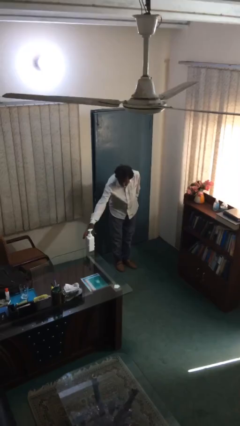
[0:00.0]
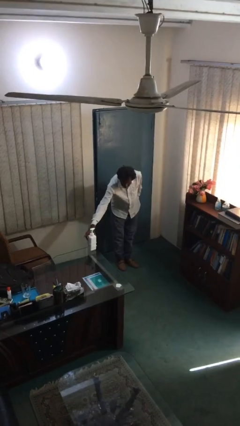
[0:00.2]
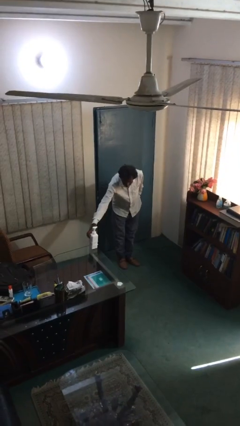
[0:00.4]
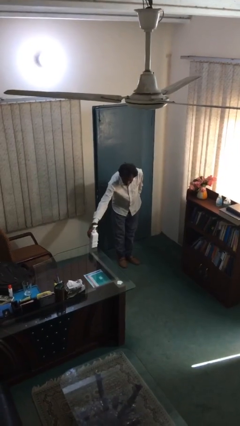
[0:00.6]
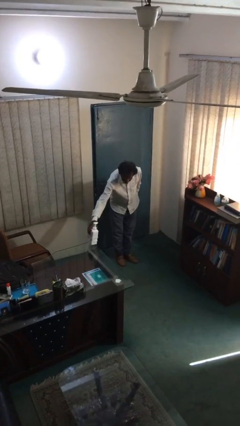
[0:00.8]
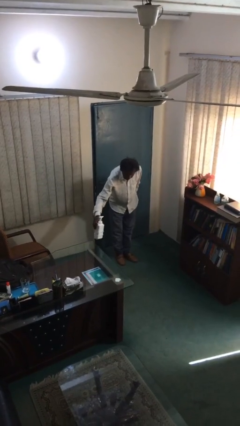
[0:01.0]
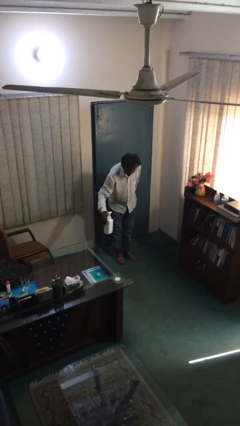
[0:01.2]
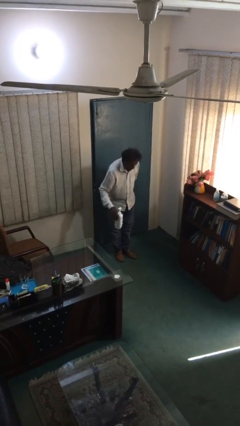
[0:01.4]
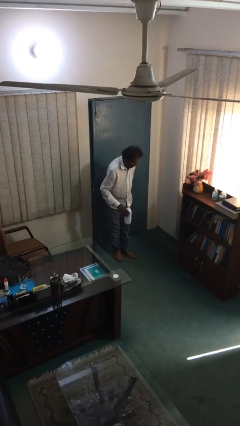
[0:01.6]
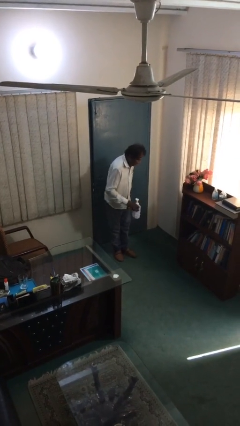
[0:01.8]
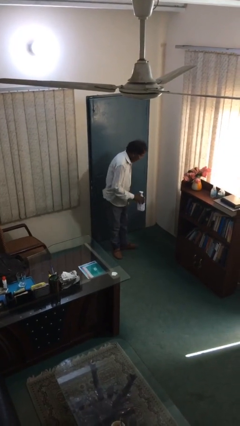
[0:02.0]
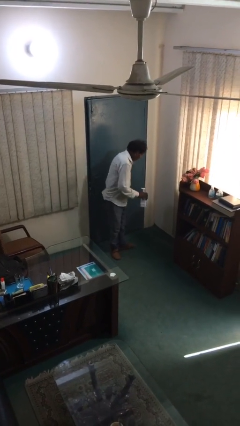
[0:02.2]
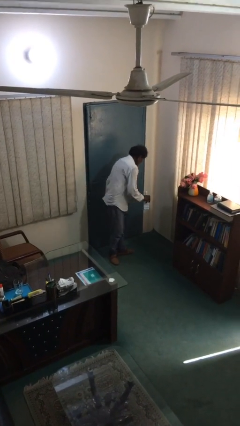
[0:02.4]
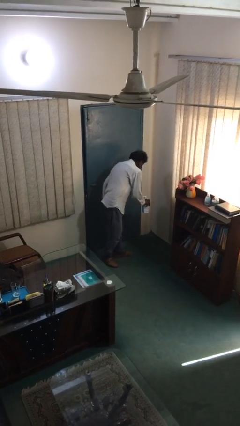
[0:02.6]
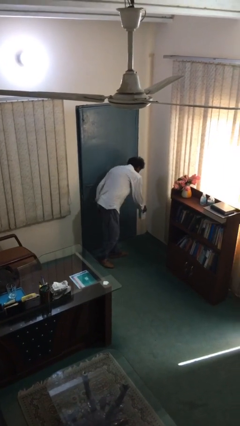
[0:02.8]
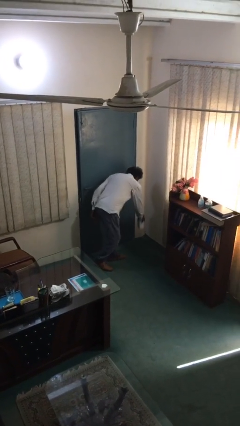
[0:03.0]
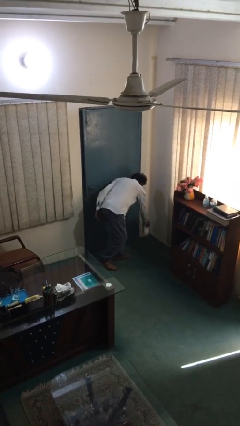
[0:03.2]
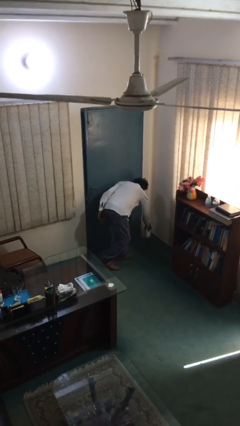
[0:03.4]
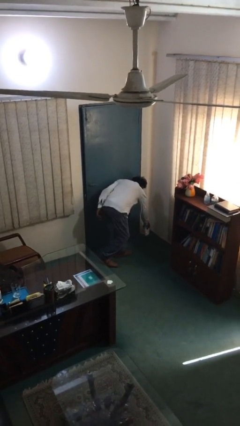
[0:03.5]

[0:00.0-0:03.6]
person picks up object from table

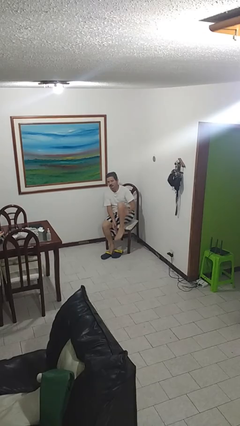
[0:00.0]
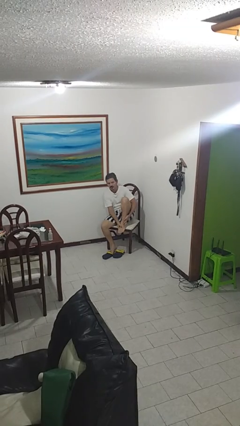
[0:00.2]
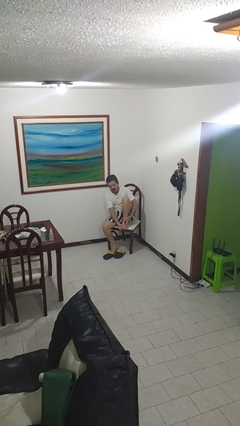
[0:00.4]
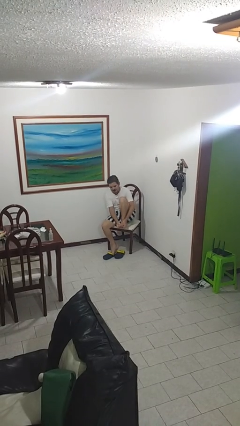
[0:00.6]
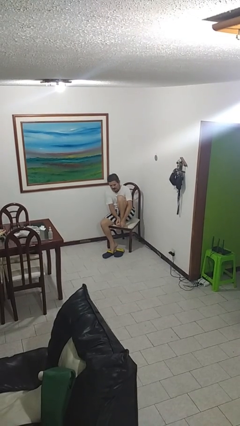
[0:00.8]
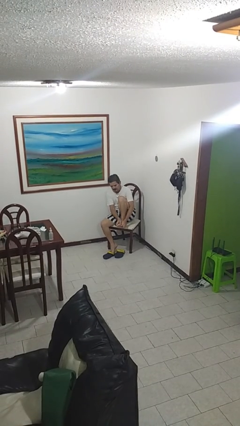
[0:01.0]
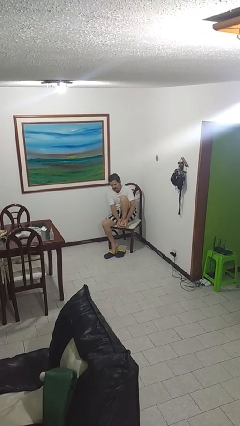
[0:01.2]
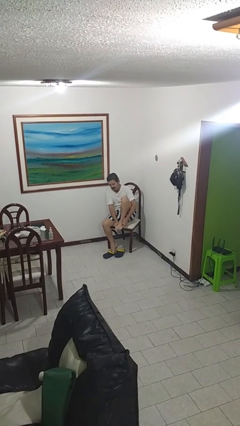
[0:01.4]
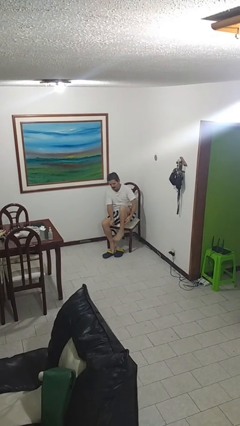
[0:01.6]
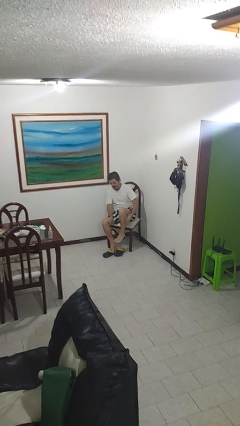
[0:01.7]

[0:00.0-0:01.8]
person rubs foot

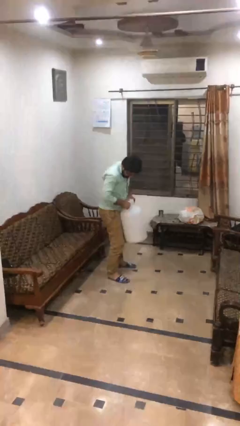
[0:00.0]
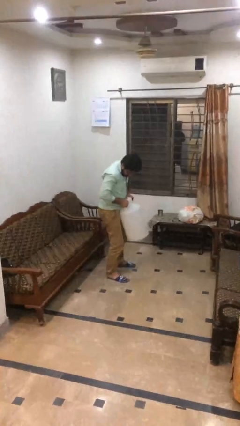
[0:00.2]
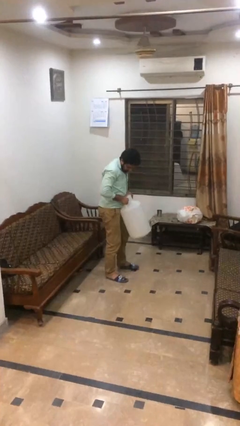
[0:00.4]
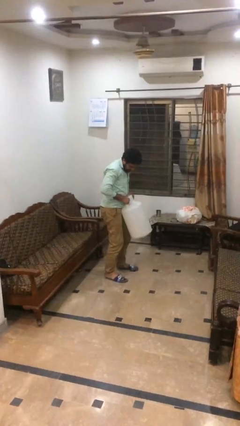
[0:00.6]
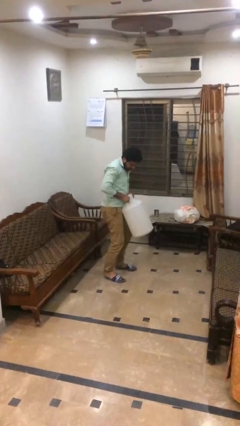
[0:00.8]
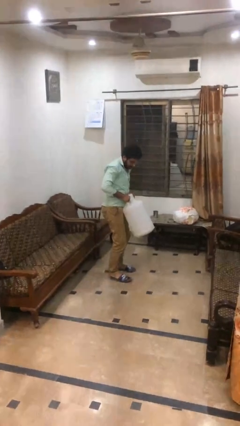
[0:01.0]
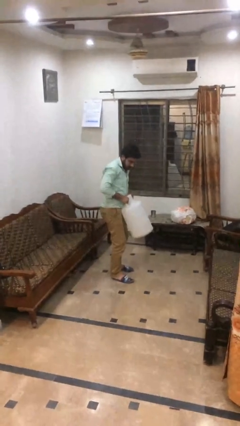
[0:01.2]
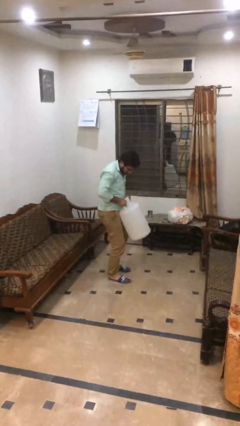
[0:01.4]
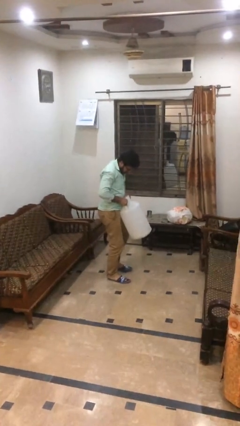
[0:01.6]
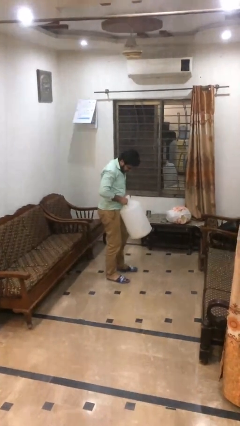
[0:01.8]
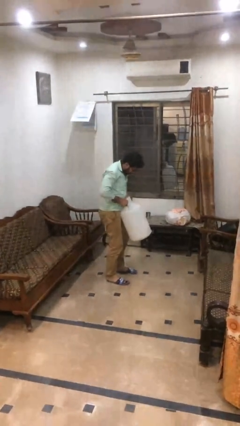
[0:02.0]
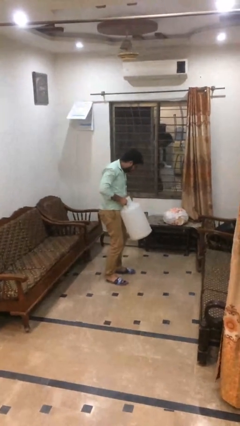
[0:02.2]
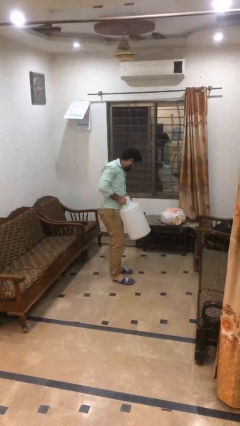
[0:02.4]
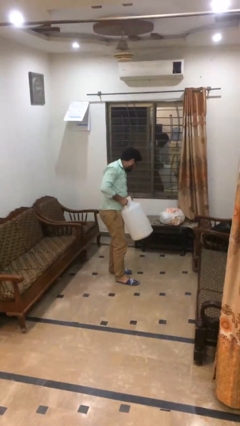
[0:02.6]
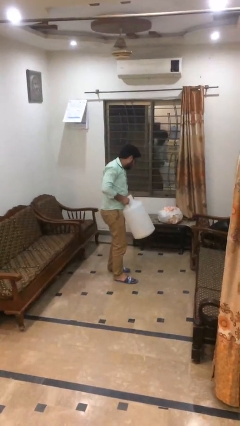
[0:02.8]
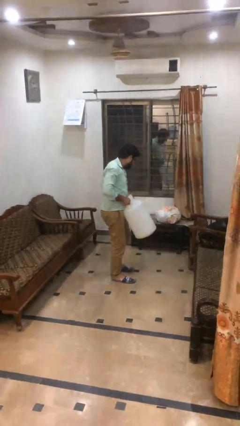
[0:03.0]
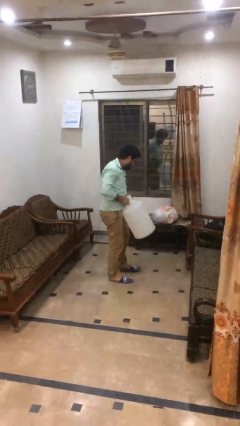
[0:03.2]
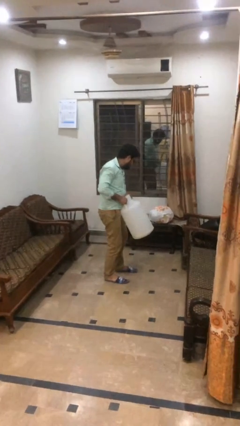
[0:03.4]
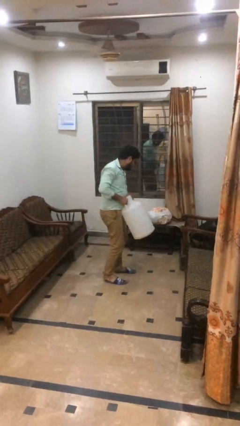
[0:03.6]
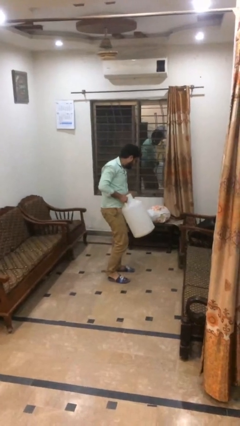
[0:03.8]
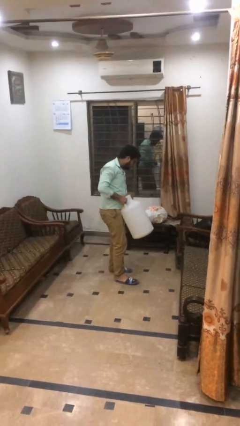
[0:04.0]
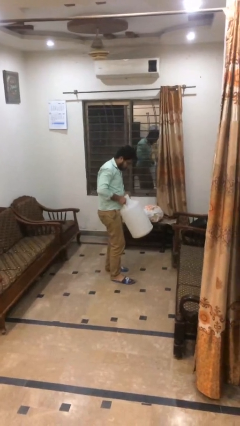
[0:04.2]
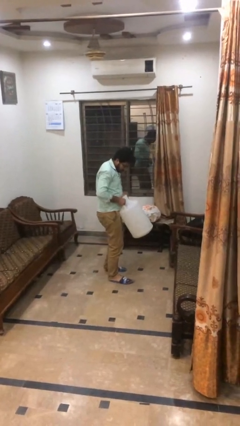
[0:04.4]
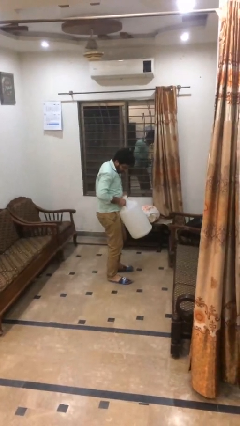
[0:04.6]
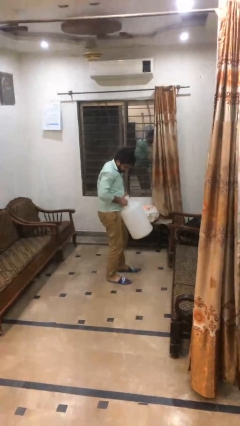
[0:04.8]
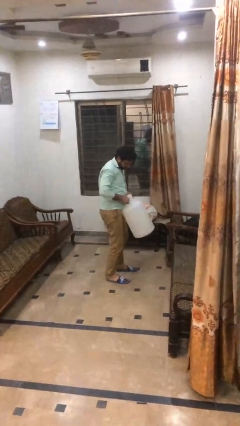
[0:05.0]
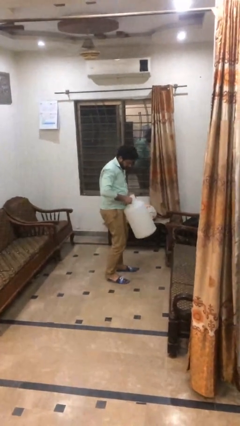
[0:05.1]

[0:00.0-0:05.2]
person carries heavy object

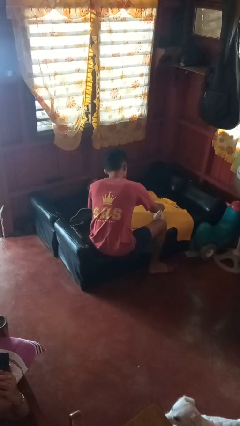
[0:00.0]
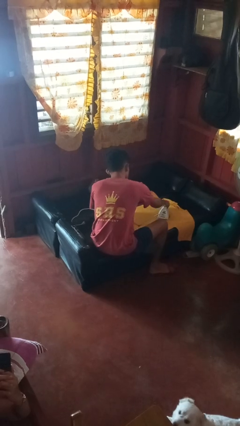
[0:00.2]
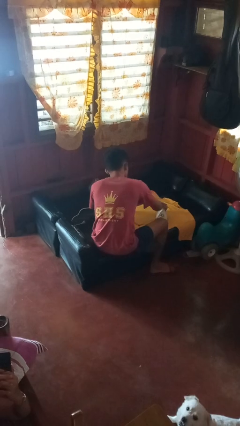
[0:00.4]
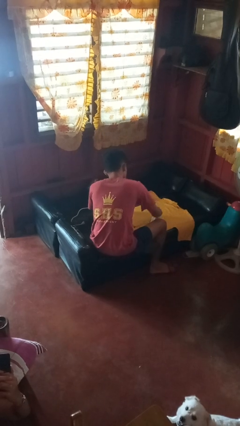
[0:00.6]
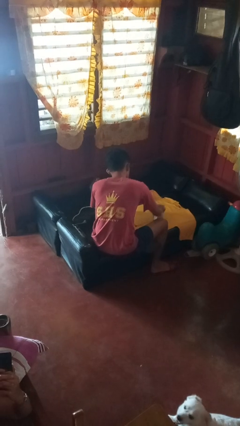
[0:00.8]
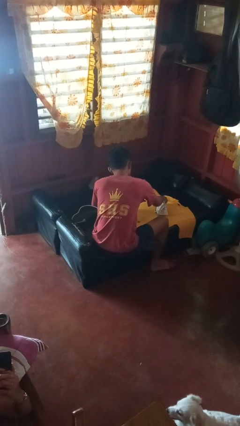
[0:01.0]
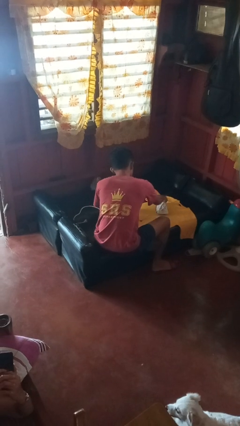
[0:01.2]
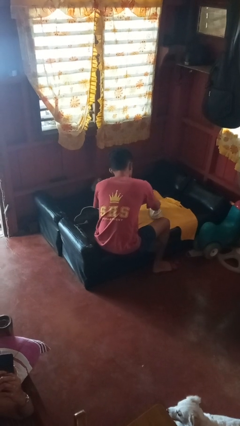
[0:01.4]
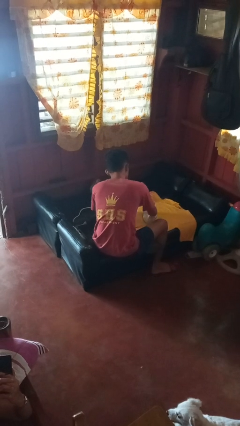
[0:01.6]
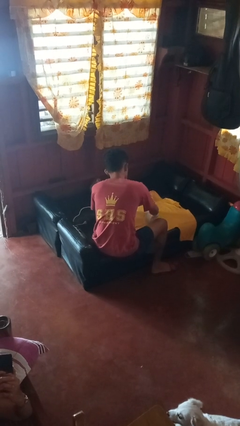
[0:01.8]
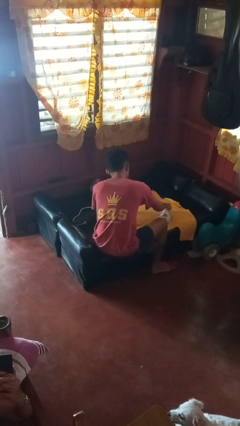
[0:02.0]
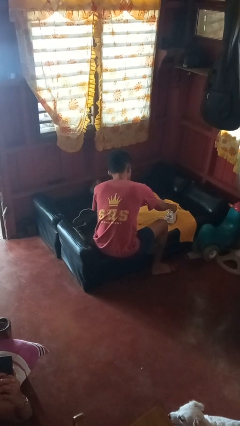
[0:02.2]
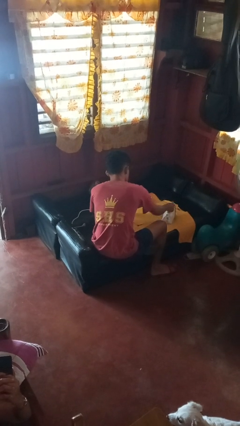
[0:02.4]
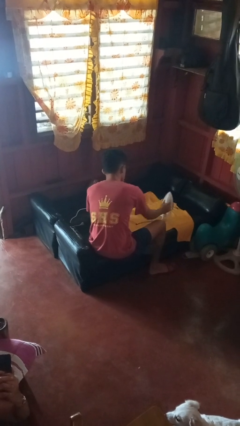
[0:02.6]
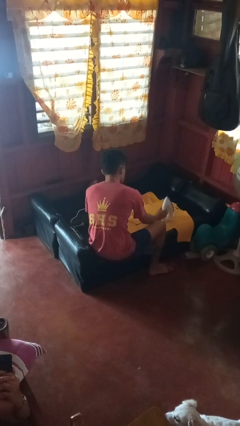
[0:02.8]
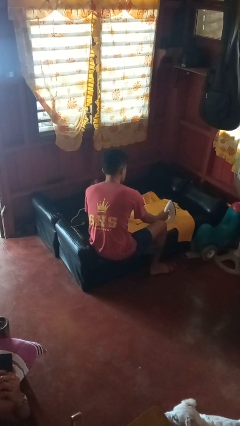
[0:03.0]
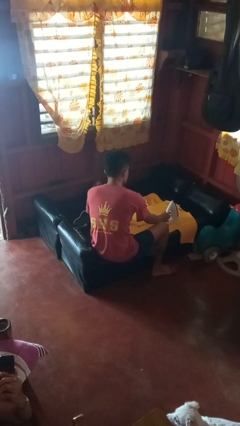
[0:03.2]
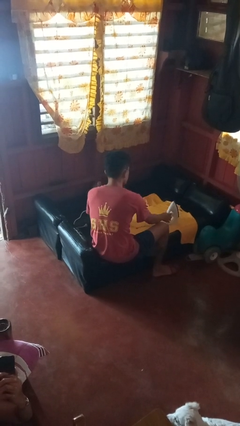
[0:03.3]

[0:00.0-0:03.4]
person irons clothes

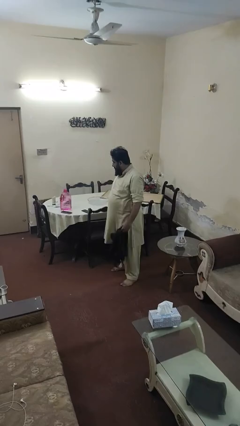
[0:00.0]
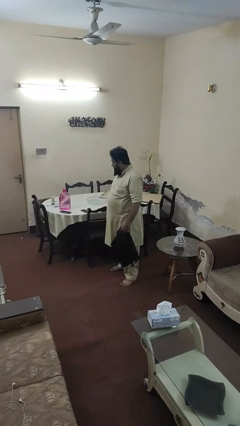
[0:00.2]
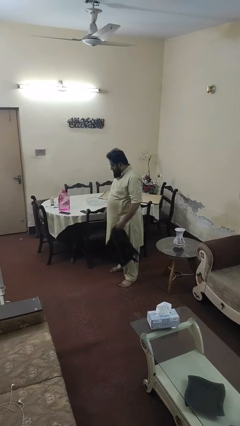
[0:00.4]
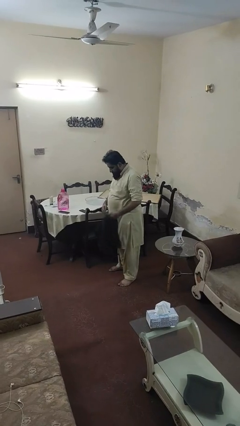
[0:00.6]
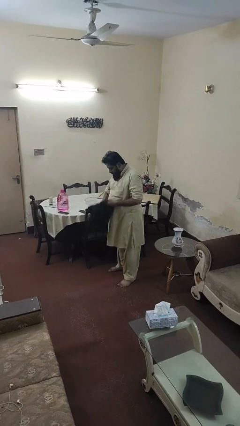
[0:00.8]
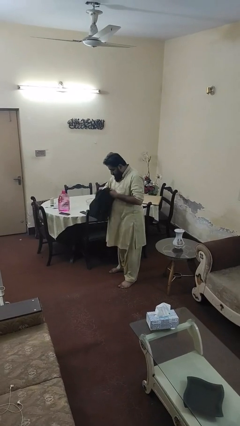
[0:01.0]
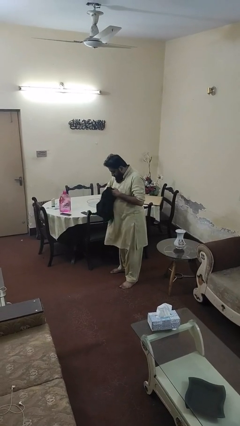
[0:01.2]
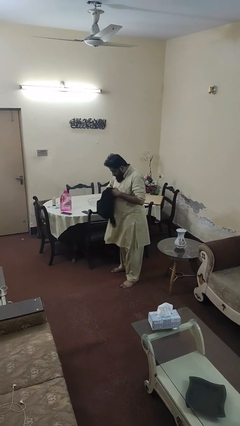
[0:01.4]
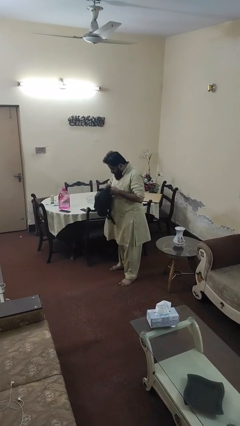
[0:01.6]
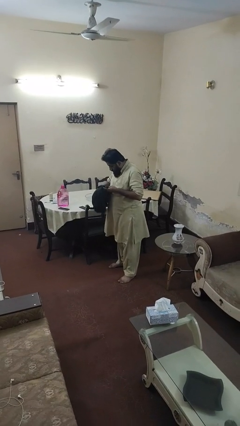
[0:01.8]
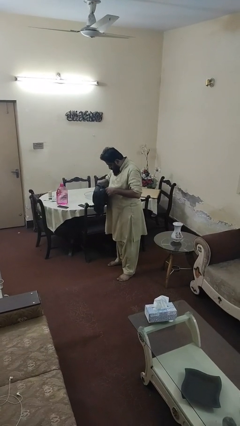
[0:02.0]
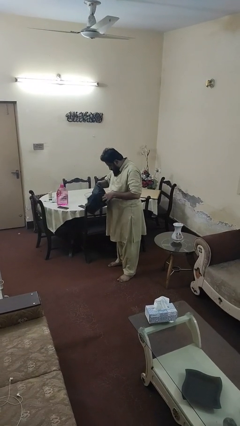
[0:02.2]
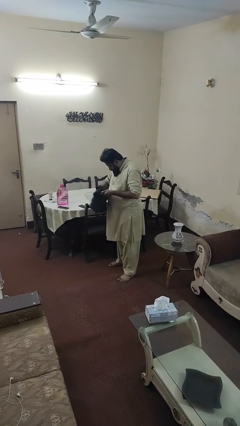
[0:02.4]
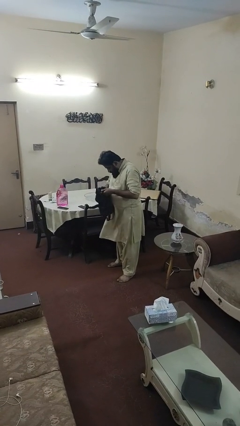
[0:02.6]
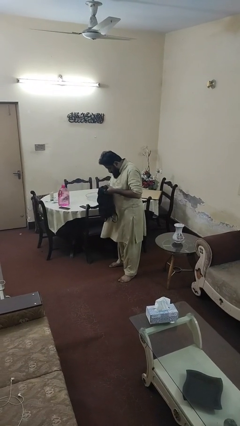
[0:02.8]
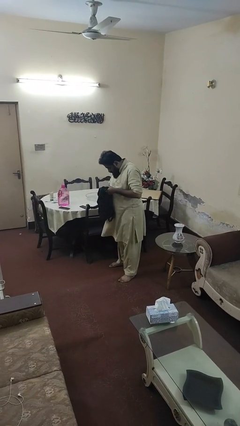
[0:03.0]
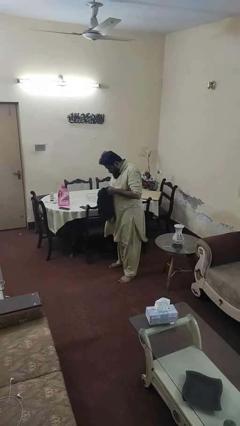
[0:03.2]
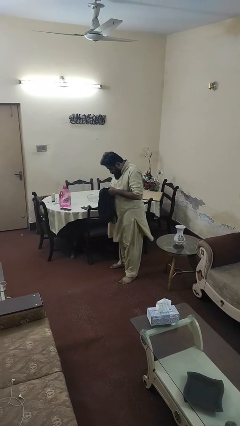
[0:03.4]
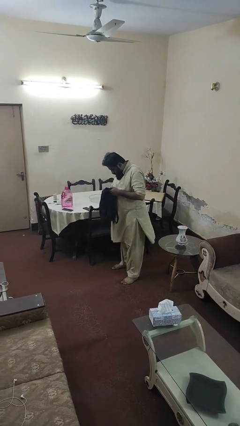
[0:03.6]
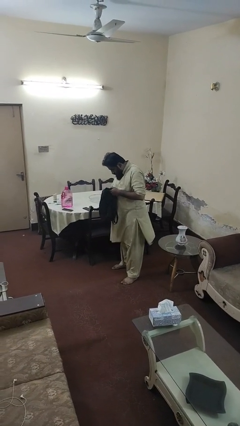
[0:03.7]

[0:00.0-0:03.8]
person searches in backpack
